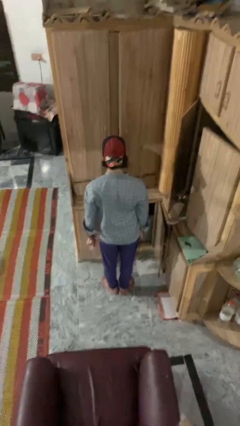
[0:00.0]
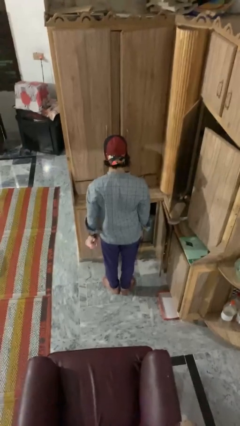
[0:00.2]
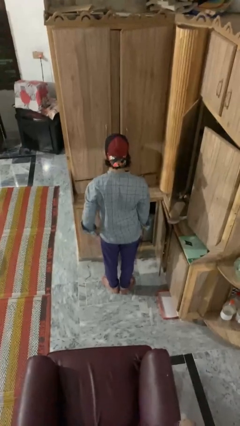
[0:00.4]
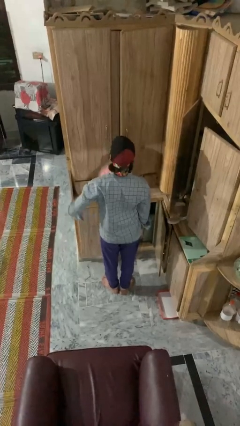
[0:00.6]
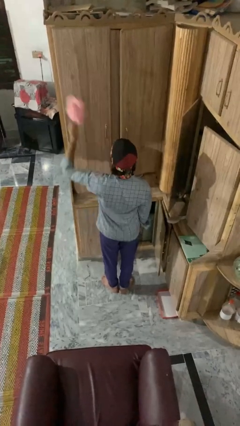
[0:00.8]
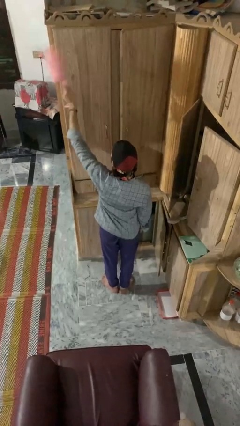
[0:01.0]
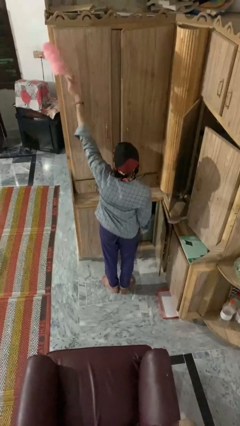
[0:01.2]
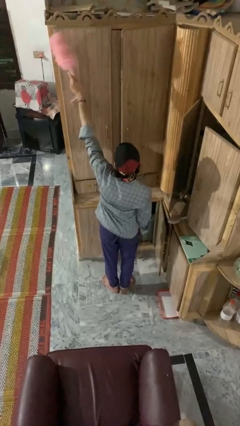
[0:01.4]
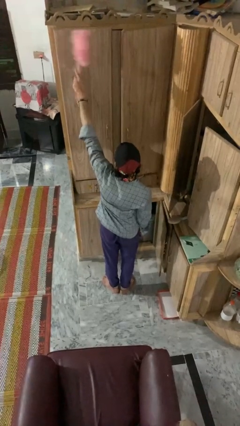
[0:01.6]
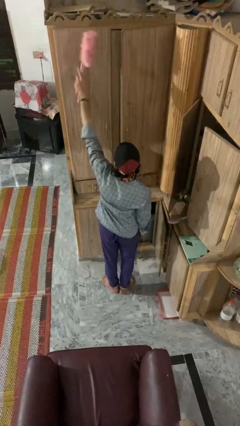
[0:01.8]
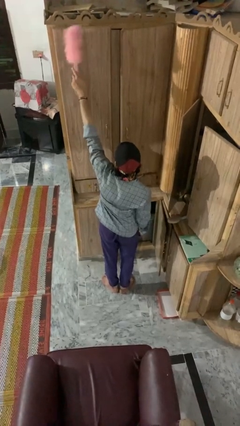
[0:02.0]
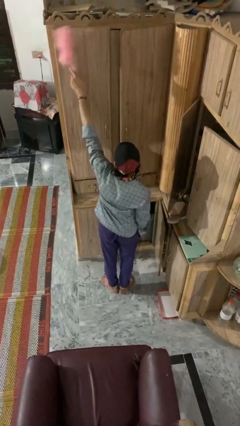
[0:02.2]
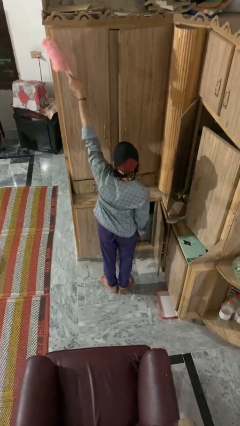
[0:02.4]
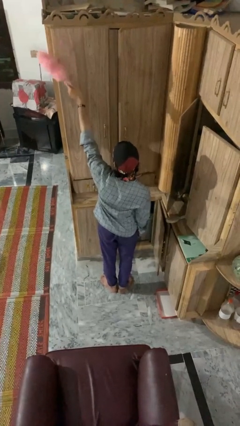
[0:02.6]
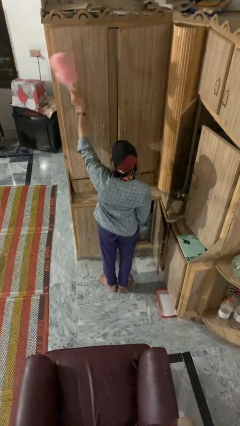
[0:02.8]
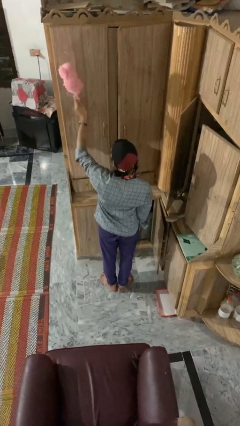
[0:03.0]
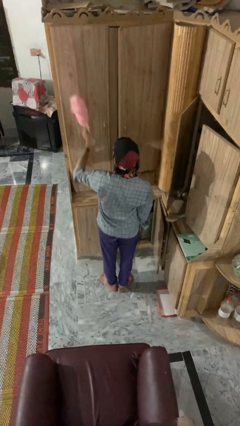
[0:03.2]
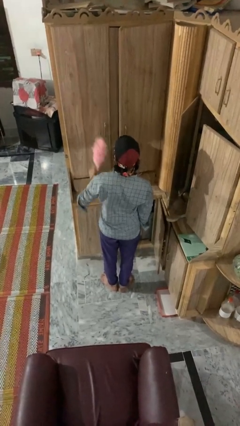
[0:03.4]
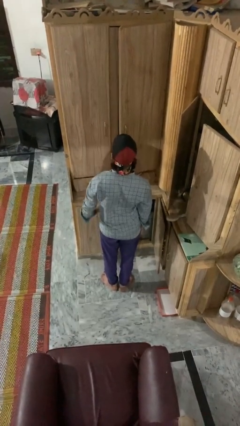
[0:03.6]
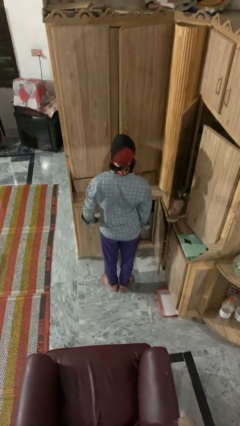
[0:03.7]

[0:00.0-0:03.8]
person dusts furniture

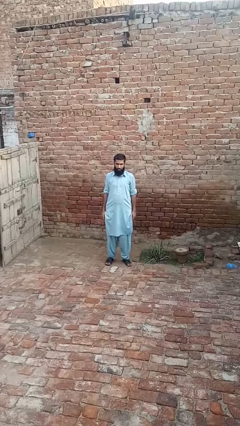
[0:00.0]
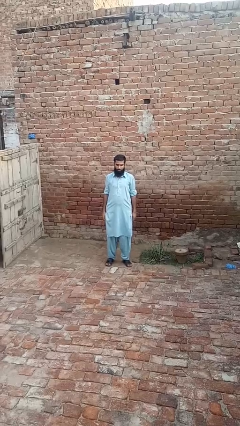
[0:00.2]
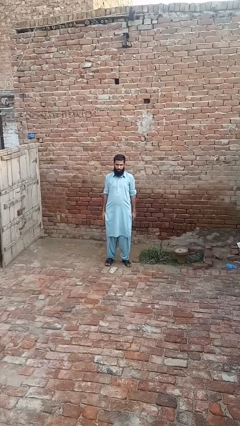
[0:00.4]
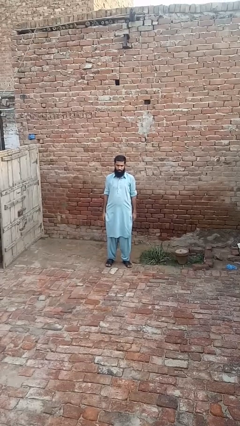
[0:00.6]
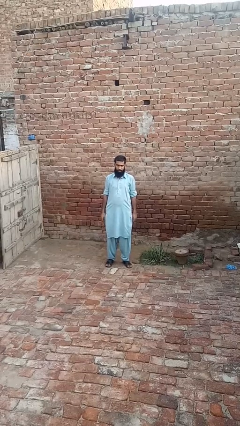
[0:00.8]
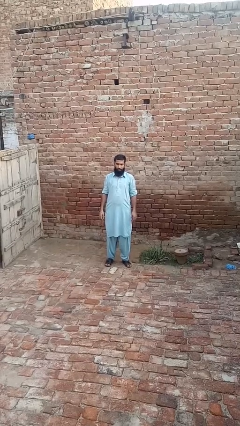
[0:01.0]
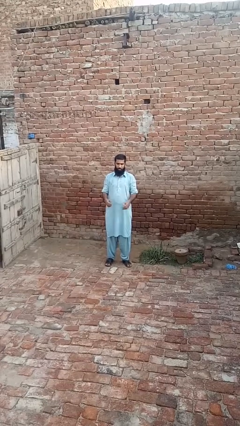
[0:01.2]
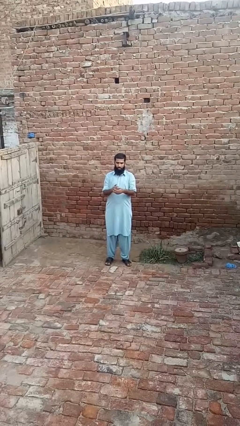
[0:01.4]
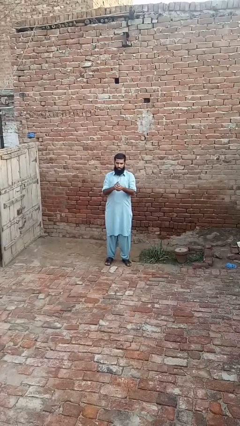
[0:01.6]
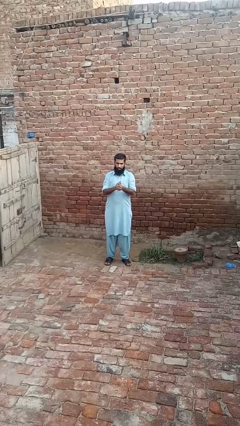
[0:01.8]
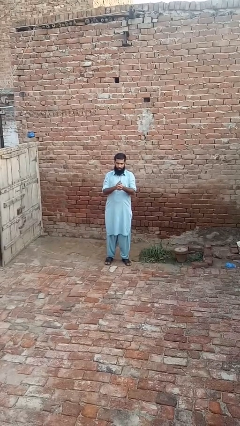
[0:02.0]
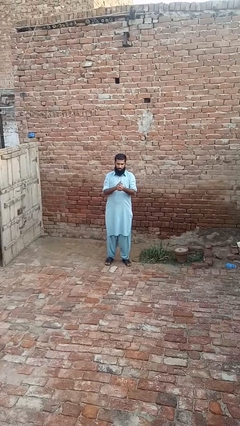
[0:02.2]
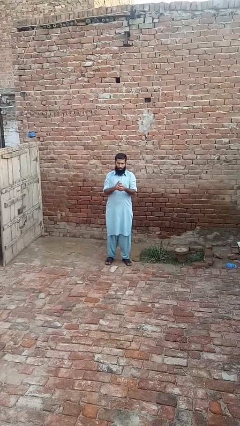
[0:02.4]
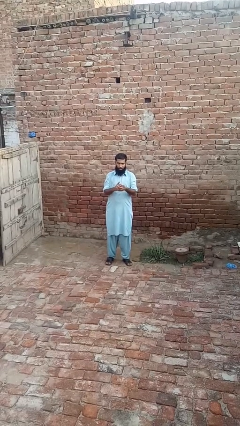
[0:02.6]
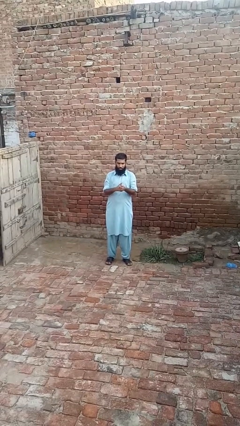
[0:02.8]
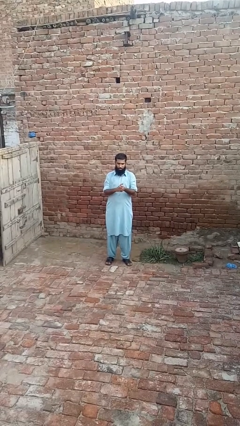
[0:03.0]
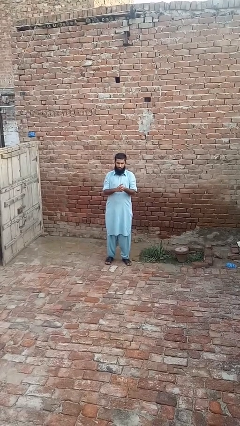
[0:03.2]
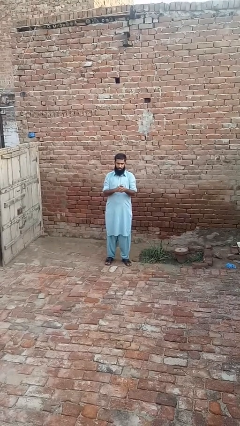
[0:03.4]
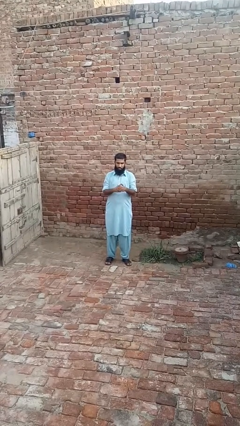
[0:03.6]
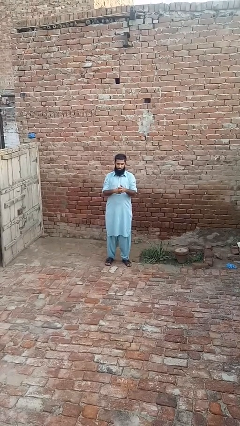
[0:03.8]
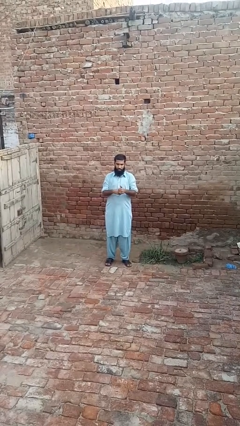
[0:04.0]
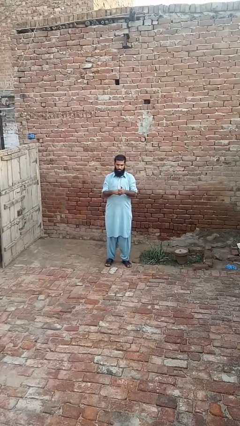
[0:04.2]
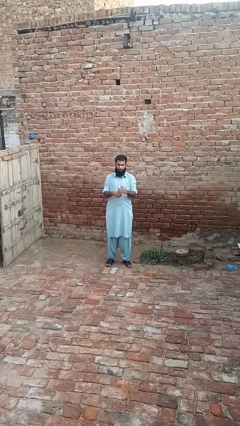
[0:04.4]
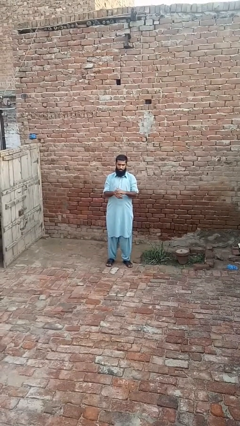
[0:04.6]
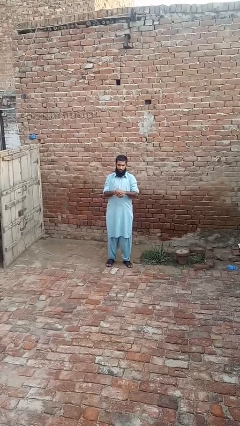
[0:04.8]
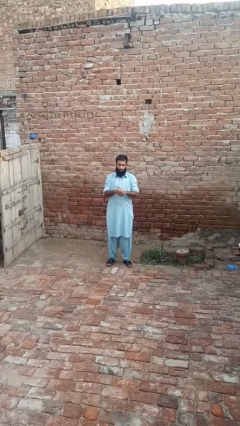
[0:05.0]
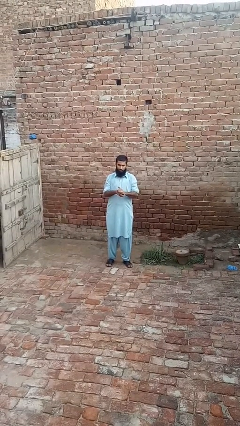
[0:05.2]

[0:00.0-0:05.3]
person cracks knuckles

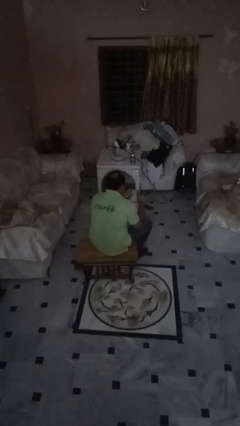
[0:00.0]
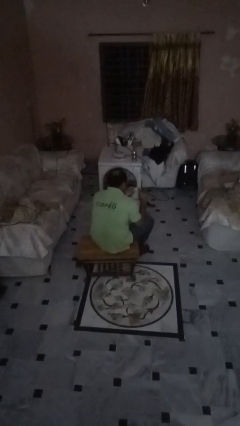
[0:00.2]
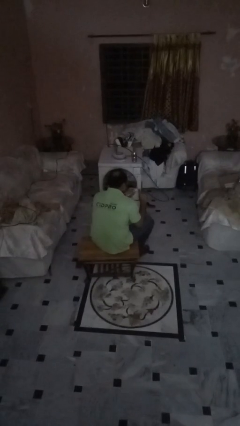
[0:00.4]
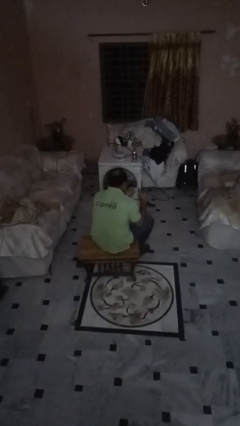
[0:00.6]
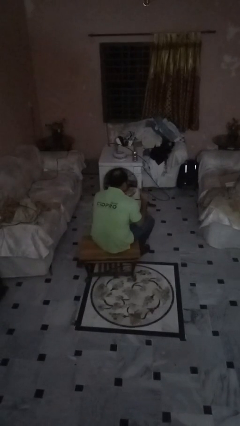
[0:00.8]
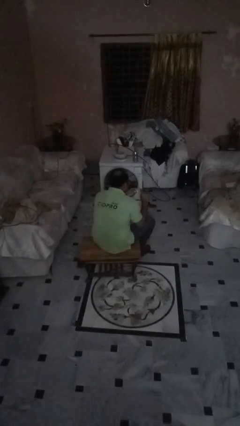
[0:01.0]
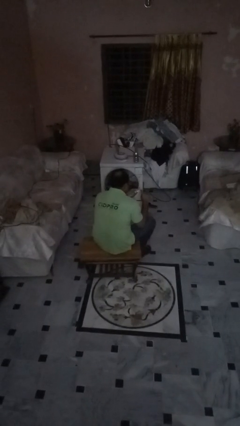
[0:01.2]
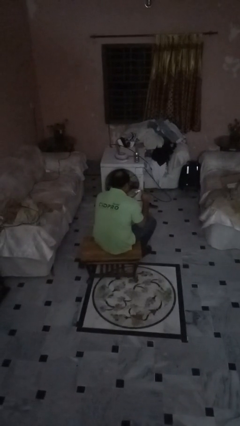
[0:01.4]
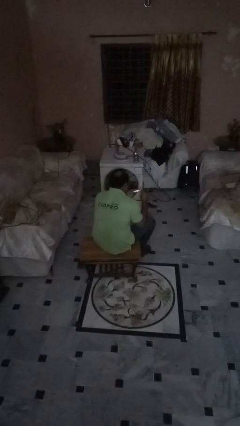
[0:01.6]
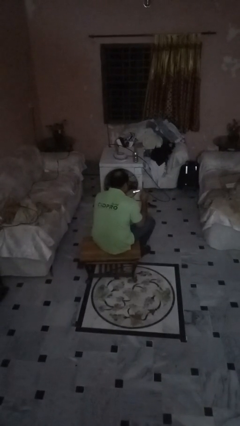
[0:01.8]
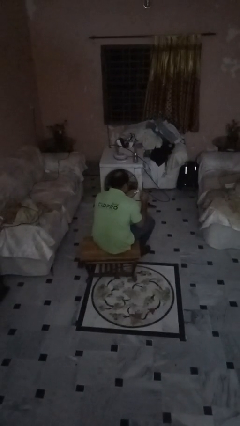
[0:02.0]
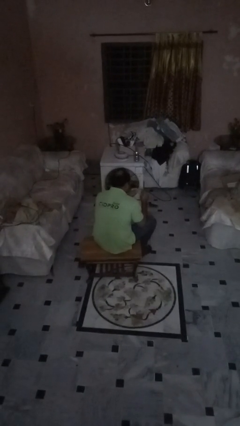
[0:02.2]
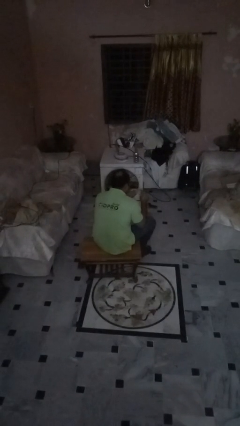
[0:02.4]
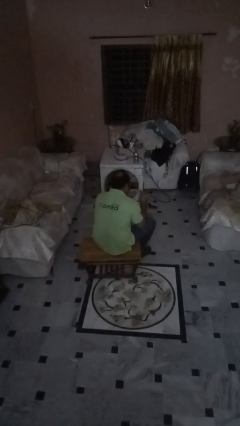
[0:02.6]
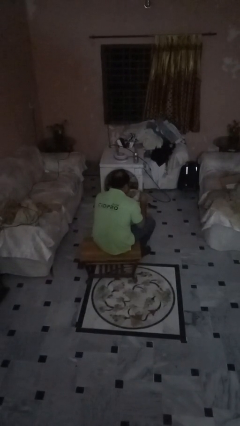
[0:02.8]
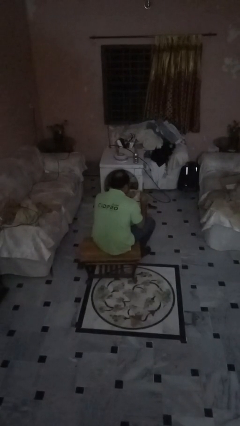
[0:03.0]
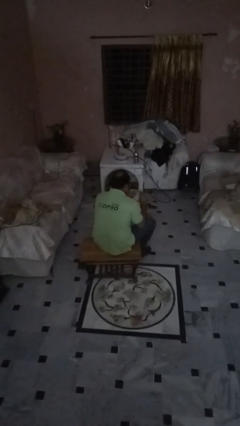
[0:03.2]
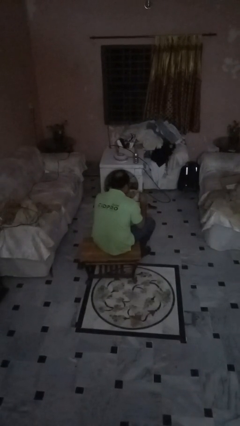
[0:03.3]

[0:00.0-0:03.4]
person files fingernails

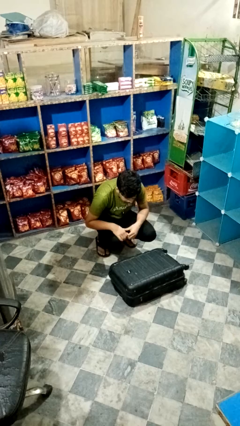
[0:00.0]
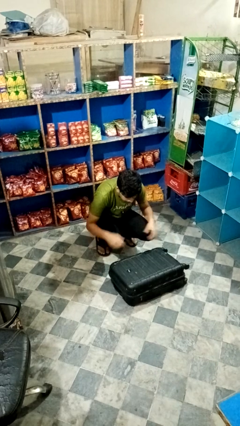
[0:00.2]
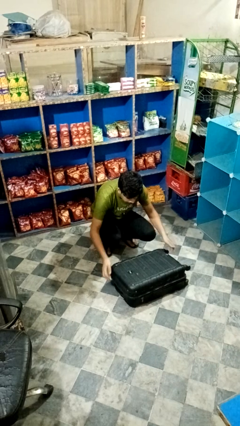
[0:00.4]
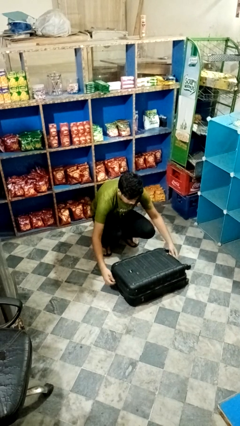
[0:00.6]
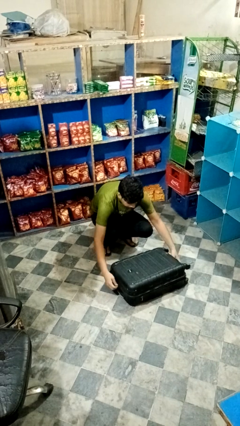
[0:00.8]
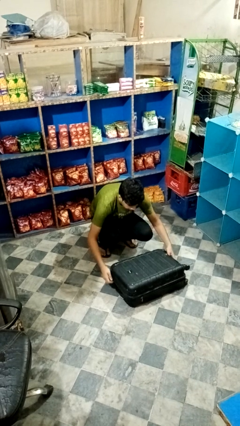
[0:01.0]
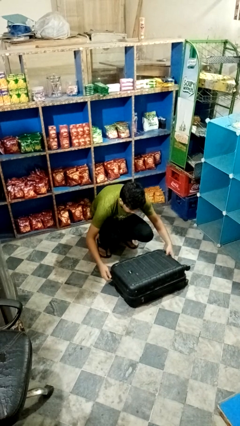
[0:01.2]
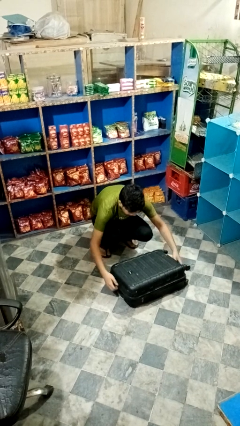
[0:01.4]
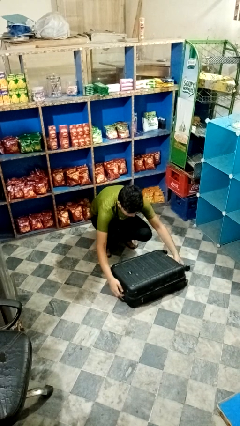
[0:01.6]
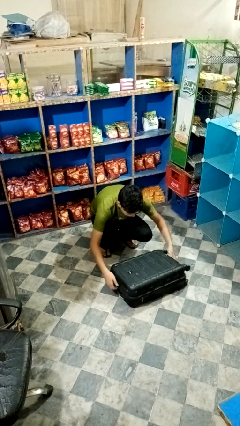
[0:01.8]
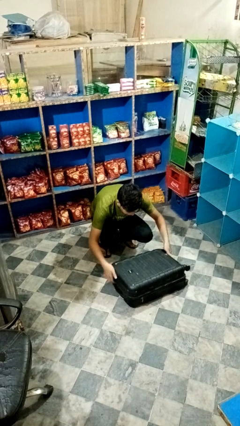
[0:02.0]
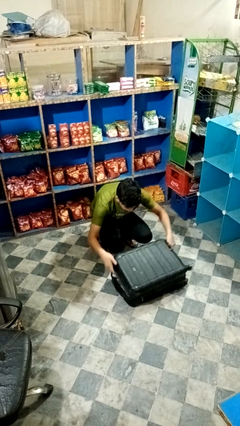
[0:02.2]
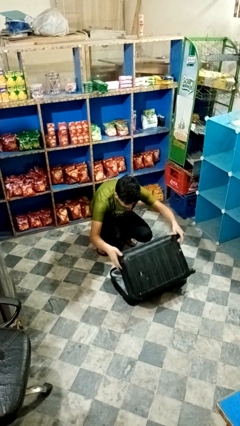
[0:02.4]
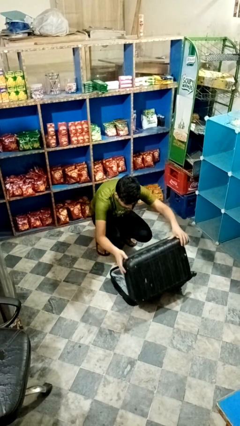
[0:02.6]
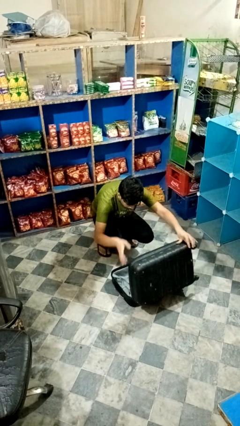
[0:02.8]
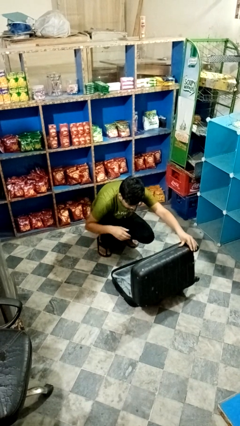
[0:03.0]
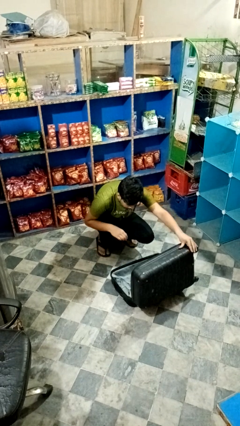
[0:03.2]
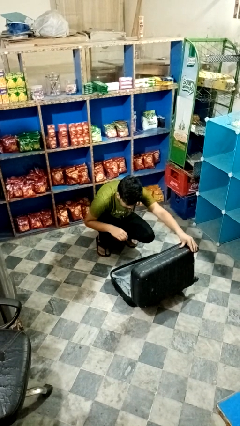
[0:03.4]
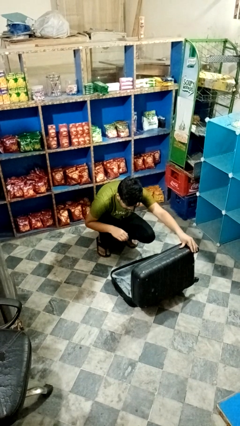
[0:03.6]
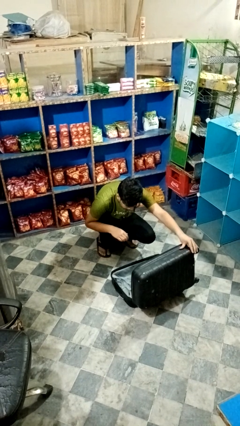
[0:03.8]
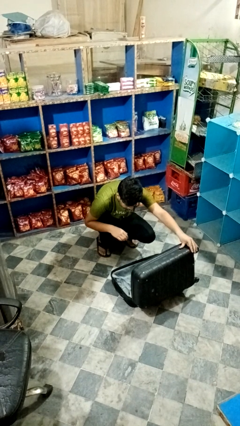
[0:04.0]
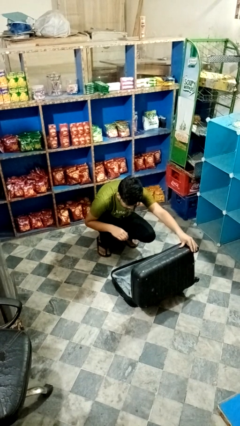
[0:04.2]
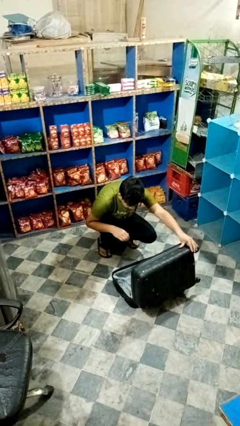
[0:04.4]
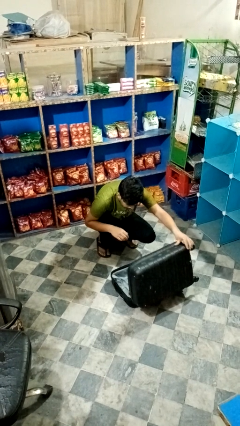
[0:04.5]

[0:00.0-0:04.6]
person opens suitcase

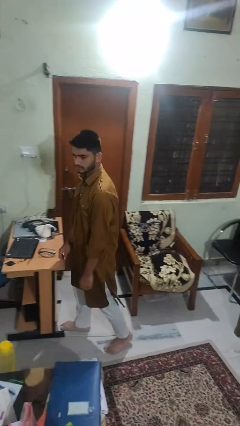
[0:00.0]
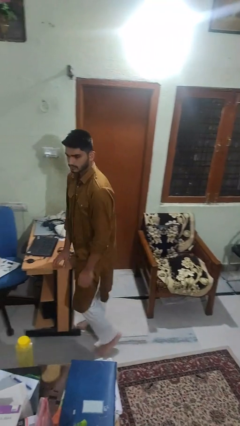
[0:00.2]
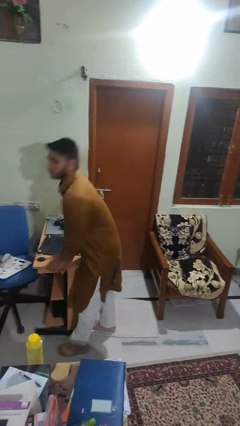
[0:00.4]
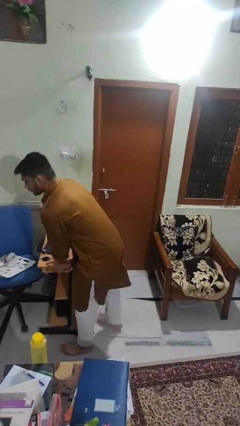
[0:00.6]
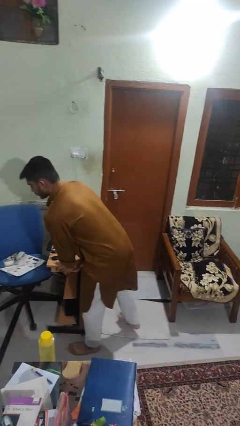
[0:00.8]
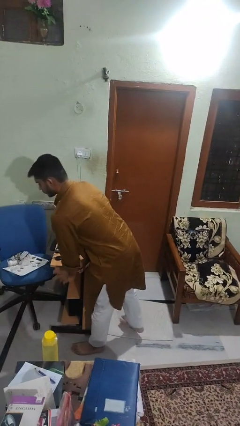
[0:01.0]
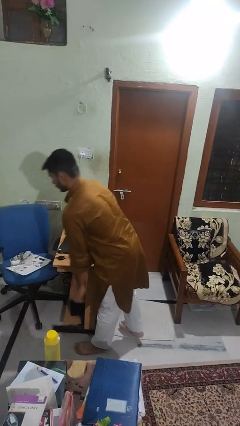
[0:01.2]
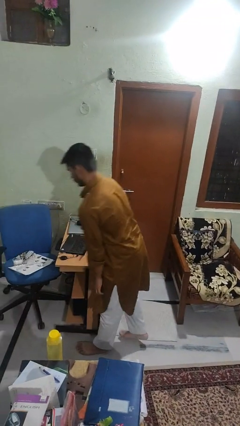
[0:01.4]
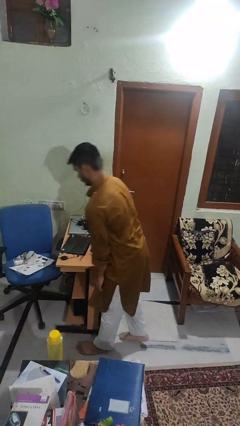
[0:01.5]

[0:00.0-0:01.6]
person bumps into table
